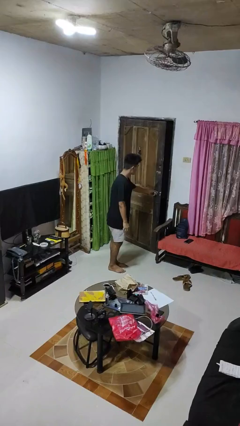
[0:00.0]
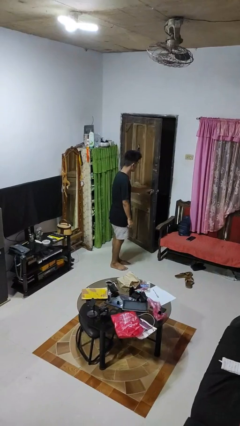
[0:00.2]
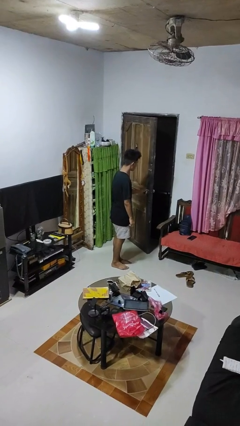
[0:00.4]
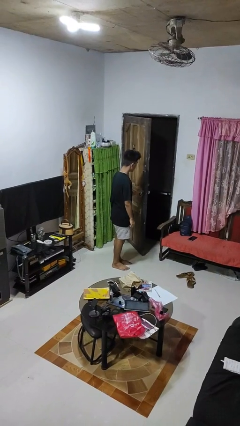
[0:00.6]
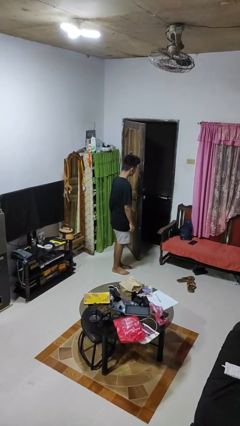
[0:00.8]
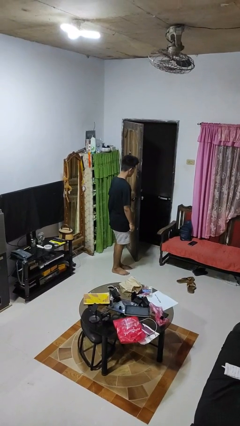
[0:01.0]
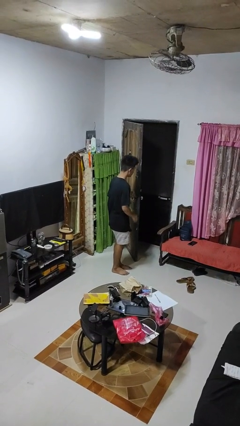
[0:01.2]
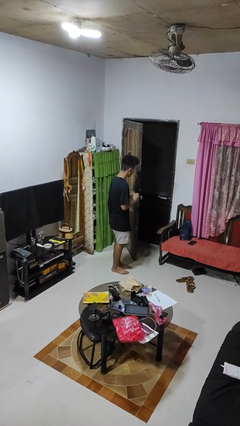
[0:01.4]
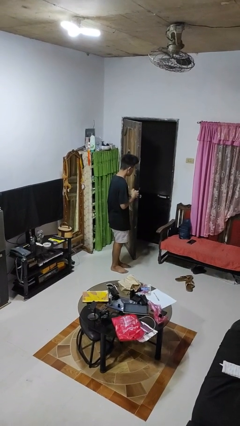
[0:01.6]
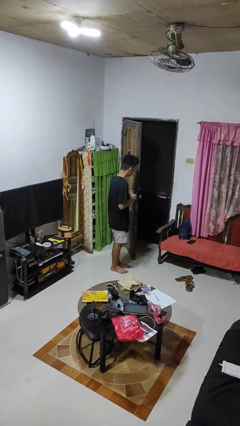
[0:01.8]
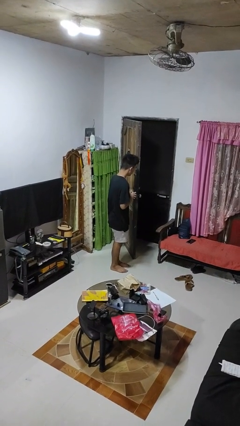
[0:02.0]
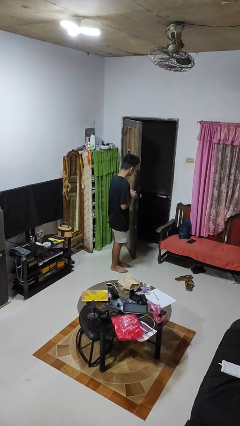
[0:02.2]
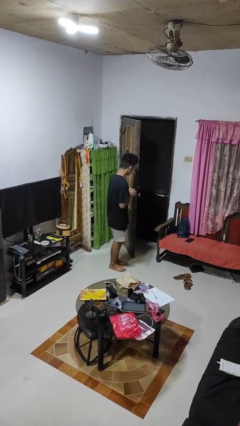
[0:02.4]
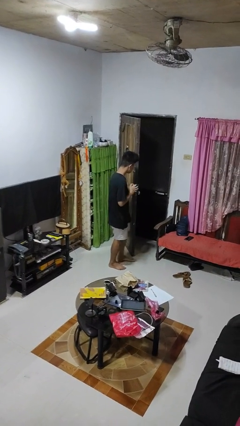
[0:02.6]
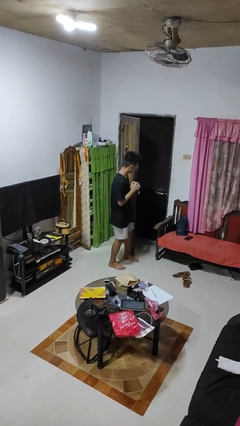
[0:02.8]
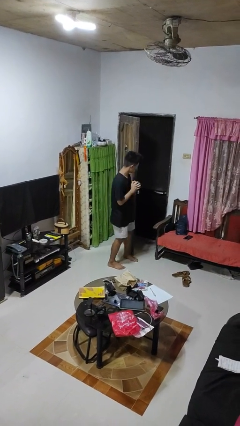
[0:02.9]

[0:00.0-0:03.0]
person opens facility door

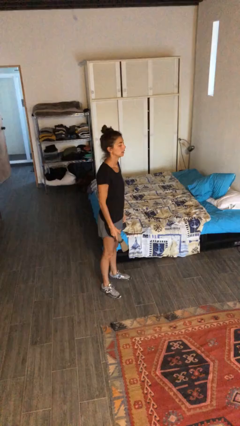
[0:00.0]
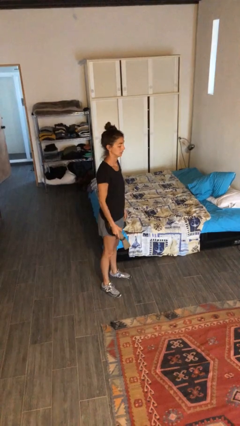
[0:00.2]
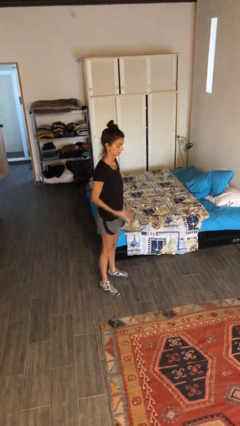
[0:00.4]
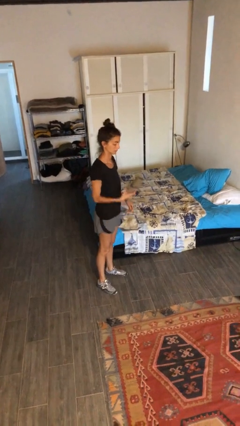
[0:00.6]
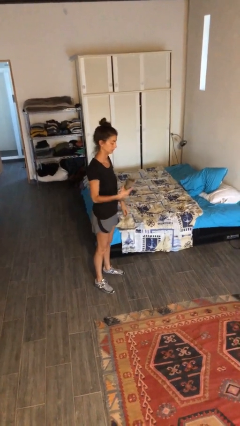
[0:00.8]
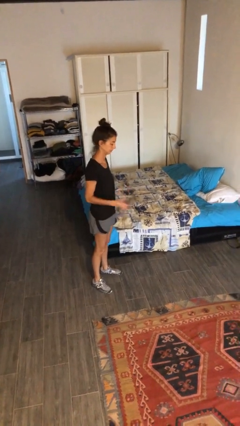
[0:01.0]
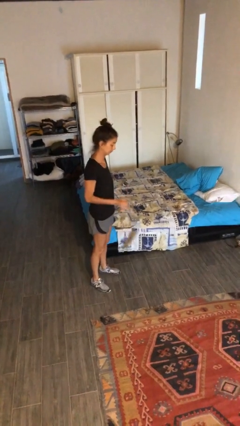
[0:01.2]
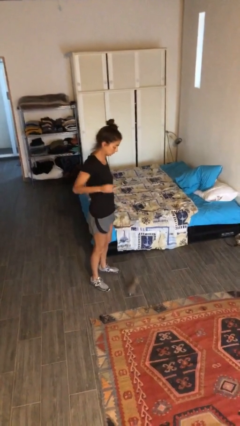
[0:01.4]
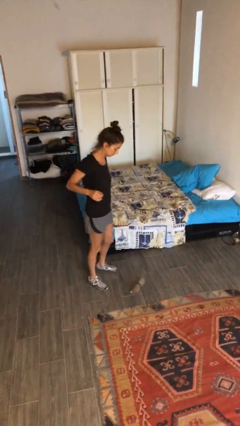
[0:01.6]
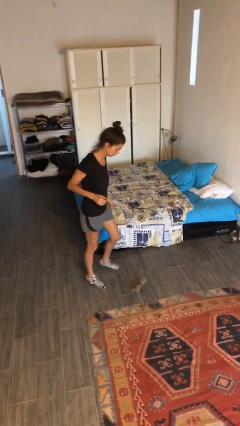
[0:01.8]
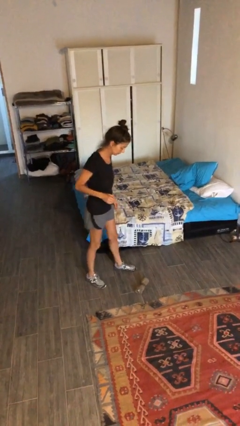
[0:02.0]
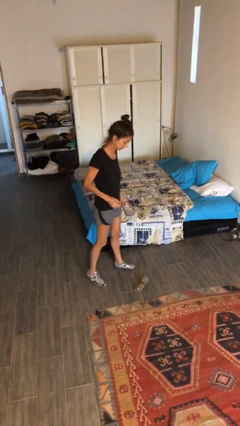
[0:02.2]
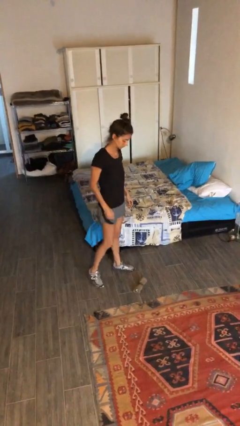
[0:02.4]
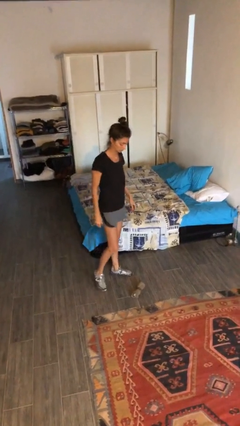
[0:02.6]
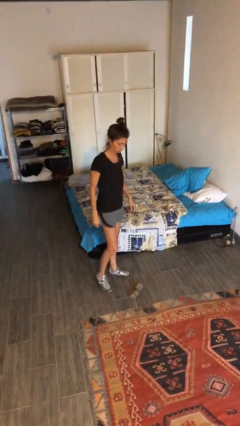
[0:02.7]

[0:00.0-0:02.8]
person drops object

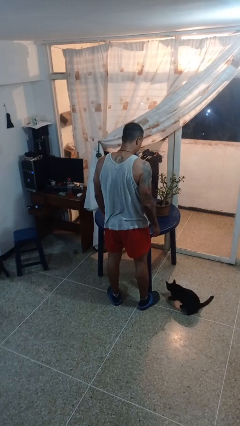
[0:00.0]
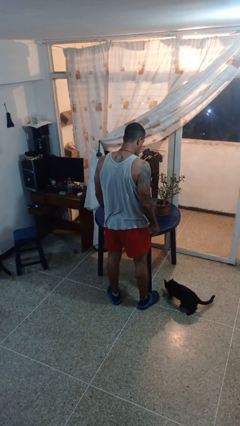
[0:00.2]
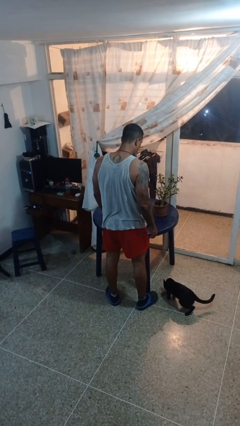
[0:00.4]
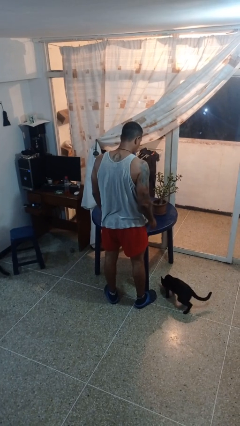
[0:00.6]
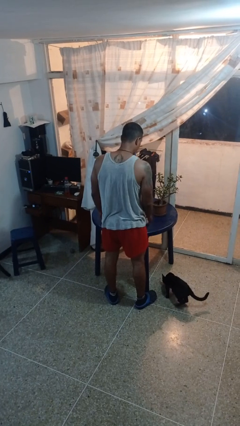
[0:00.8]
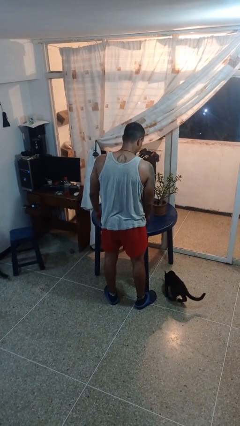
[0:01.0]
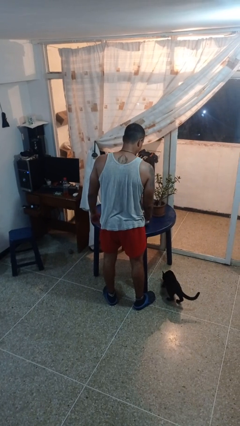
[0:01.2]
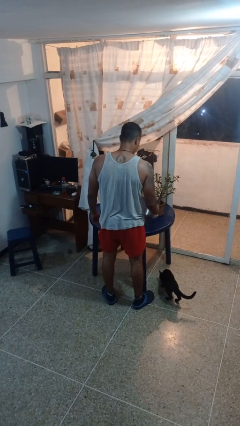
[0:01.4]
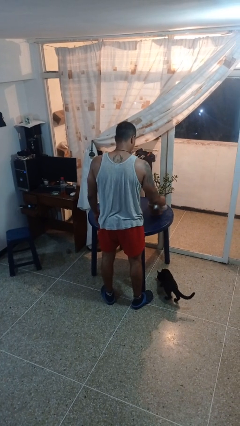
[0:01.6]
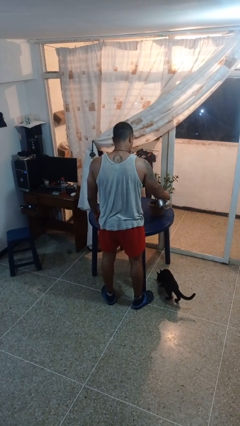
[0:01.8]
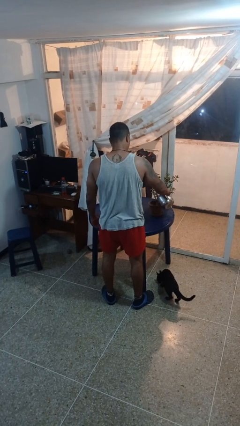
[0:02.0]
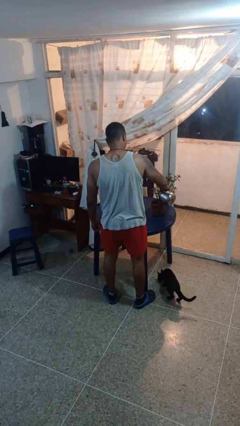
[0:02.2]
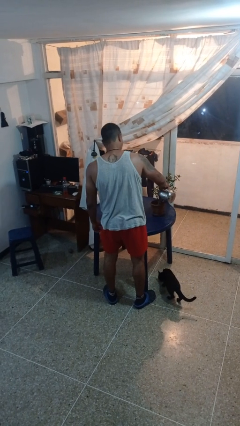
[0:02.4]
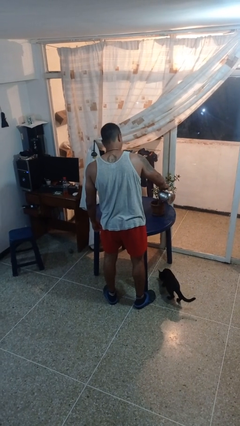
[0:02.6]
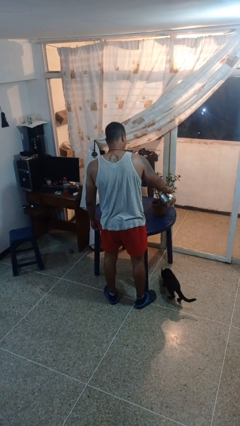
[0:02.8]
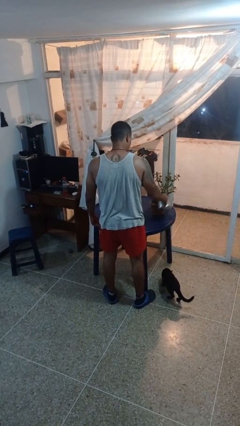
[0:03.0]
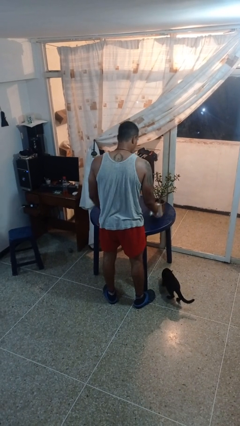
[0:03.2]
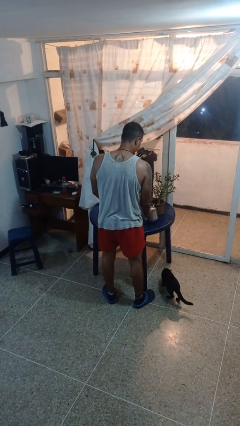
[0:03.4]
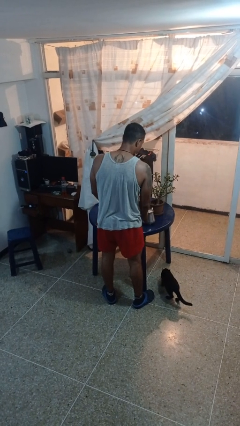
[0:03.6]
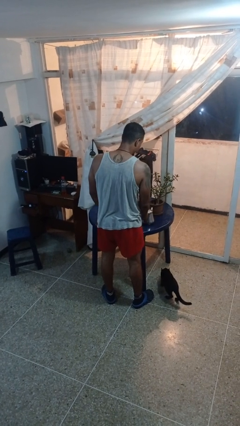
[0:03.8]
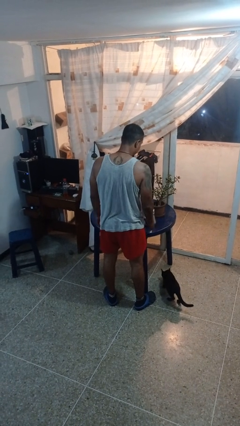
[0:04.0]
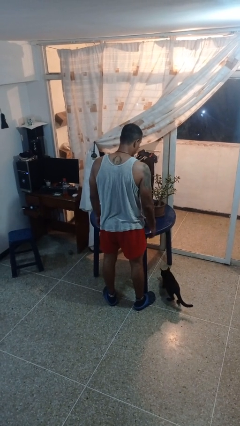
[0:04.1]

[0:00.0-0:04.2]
person waters houseplant

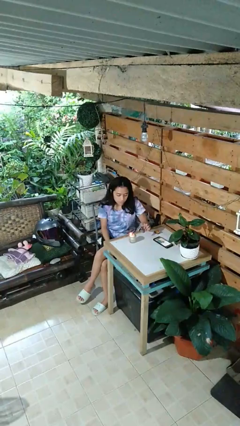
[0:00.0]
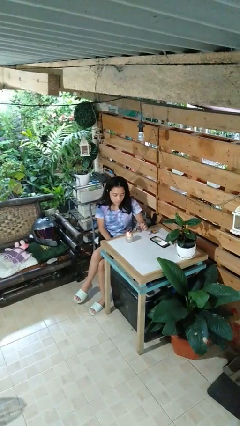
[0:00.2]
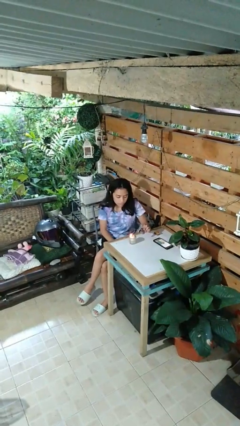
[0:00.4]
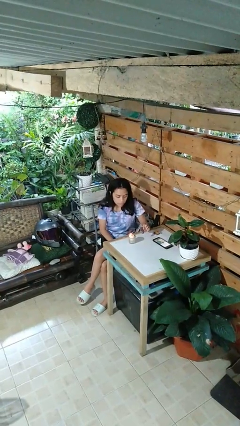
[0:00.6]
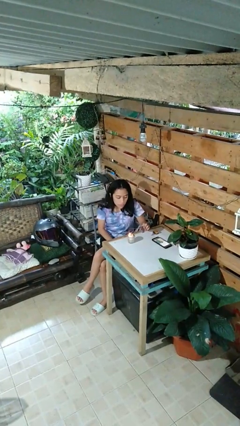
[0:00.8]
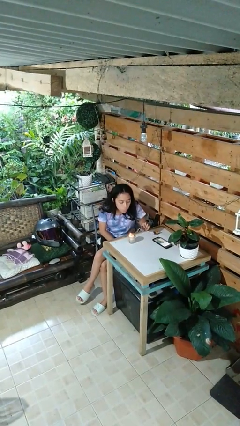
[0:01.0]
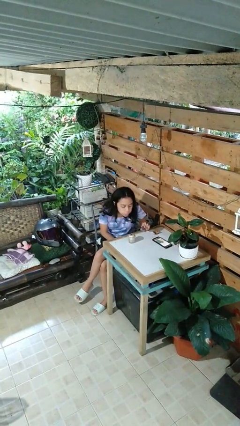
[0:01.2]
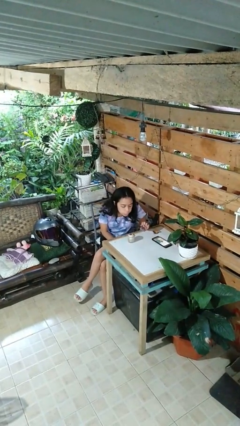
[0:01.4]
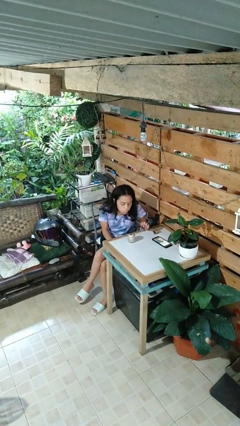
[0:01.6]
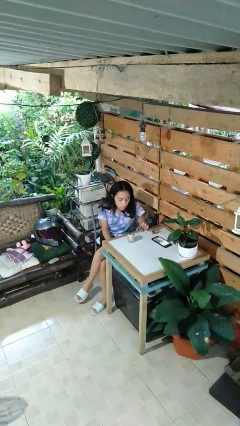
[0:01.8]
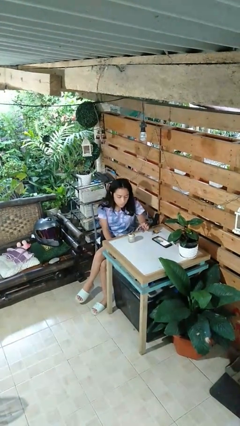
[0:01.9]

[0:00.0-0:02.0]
person extinguishes candle

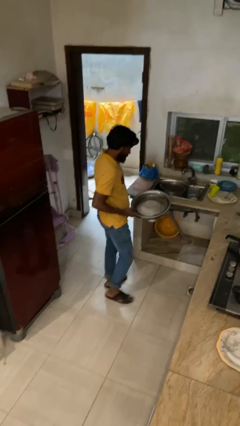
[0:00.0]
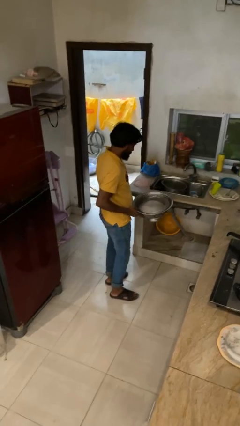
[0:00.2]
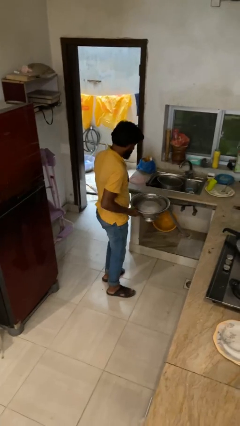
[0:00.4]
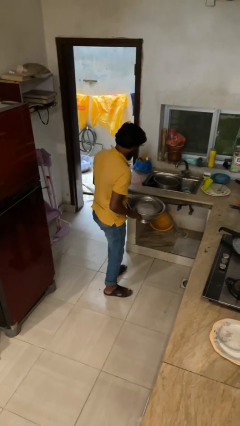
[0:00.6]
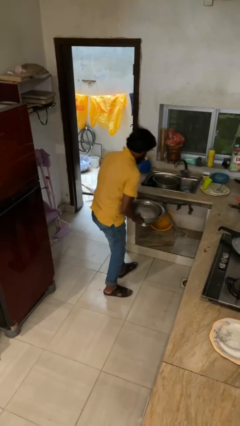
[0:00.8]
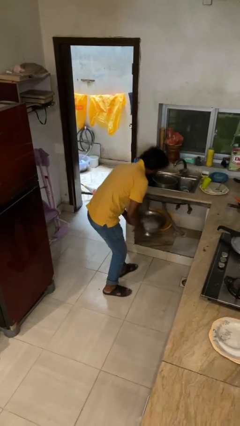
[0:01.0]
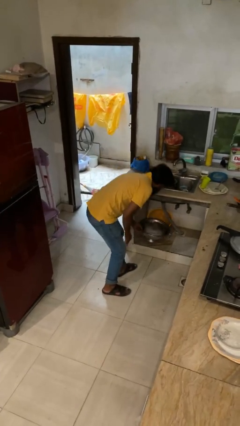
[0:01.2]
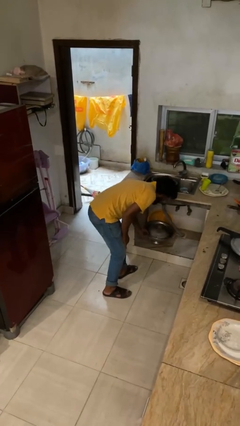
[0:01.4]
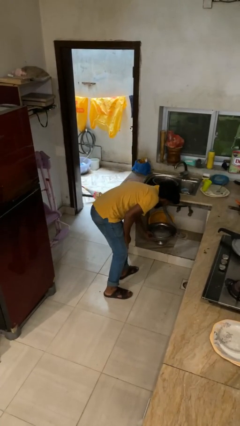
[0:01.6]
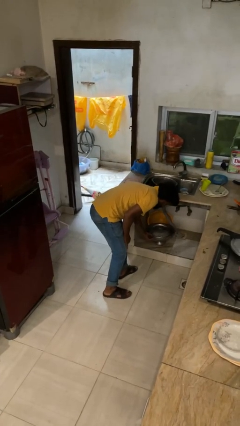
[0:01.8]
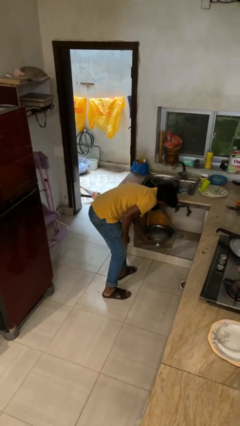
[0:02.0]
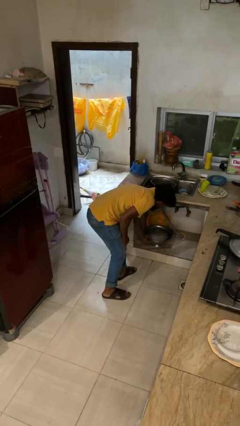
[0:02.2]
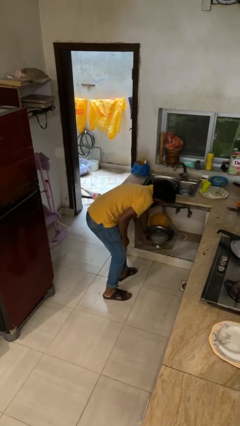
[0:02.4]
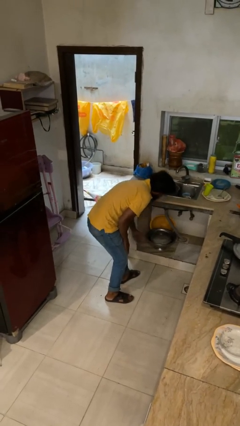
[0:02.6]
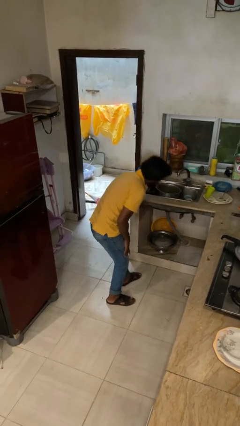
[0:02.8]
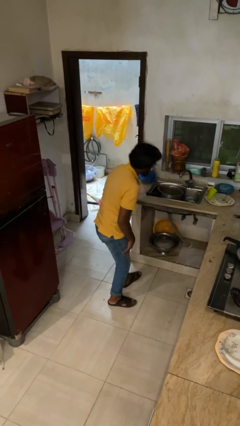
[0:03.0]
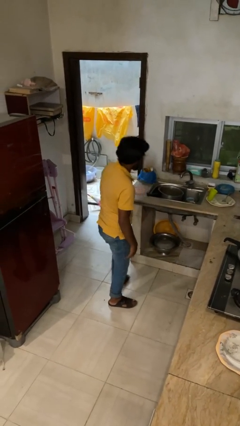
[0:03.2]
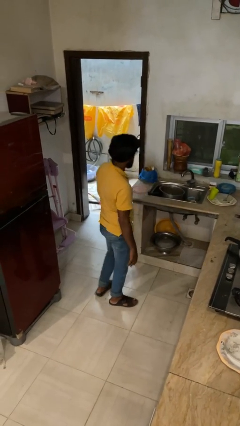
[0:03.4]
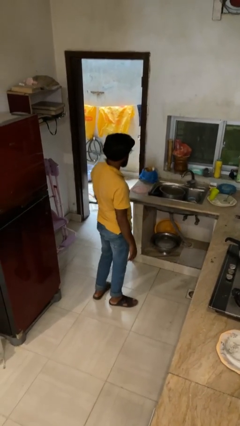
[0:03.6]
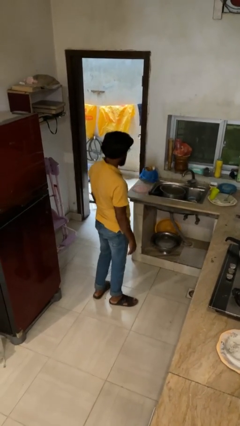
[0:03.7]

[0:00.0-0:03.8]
person puts down object into cabinet

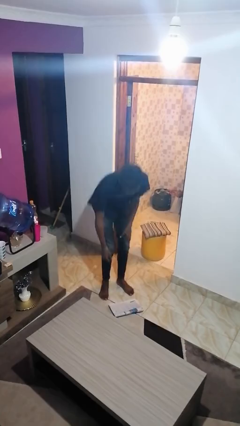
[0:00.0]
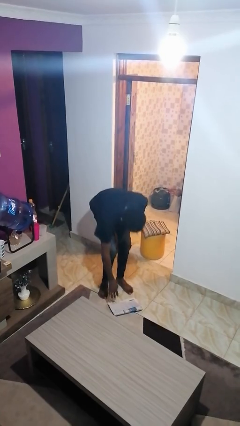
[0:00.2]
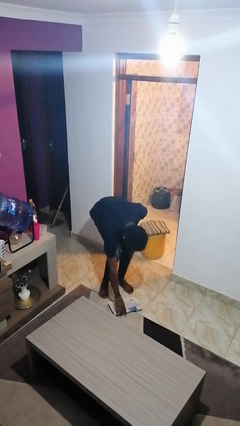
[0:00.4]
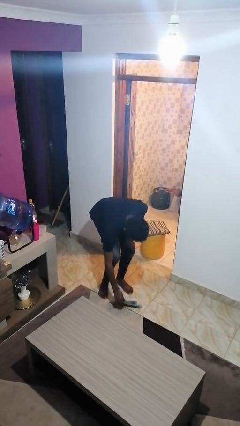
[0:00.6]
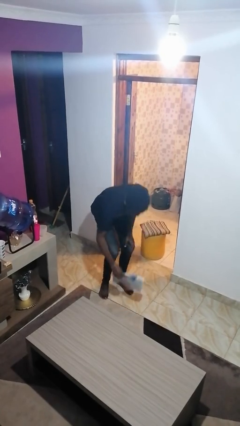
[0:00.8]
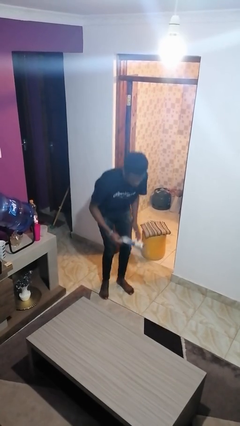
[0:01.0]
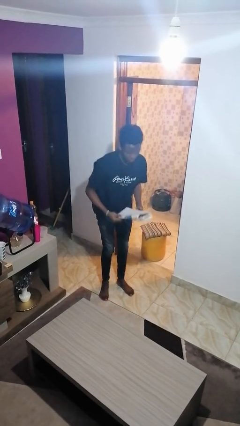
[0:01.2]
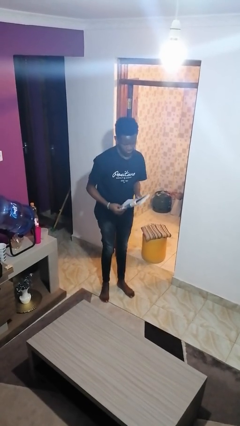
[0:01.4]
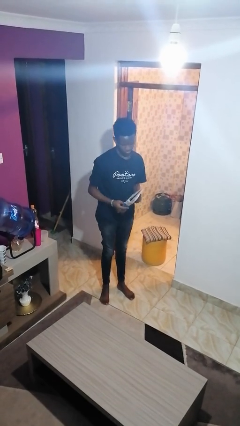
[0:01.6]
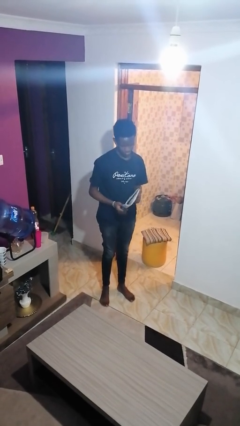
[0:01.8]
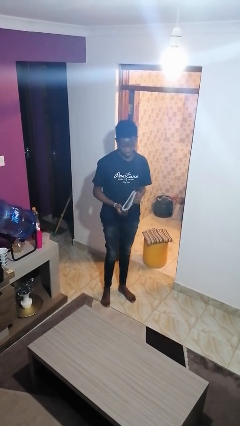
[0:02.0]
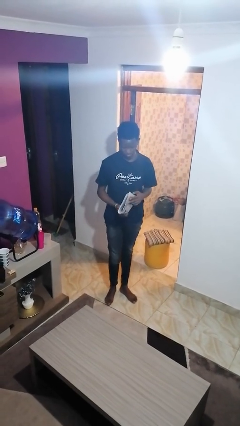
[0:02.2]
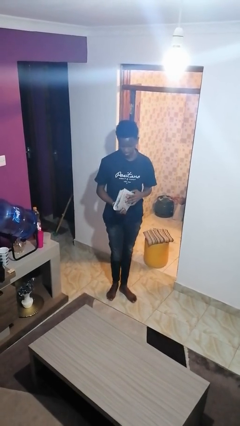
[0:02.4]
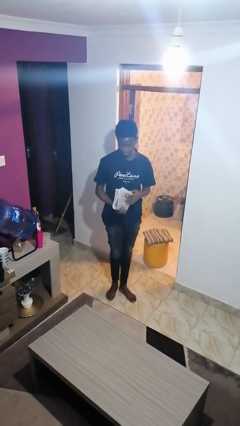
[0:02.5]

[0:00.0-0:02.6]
person picks up object from floor
